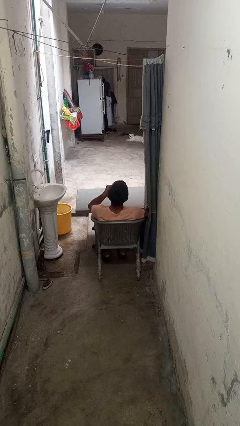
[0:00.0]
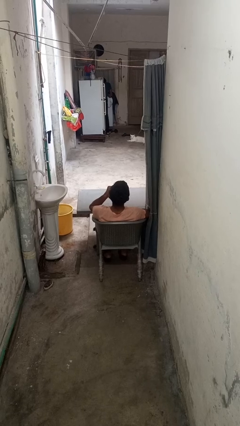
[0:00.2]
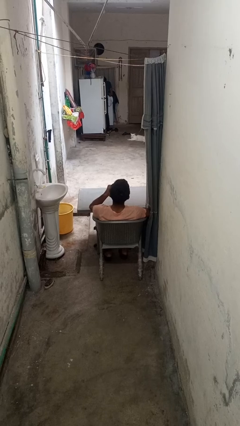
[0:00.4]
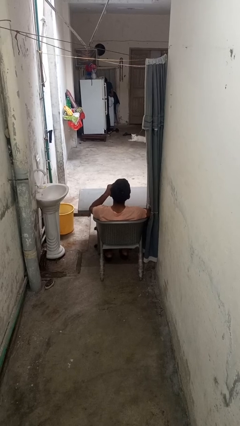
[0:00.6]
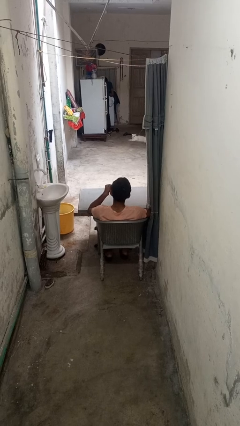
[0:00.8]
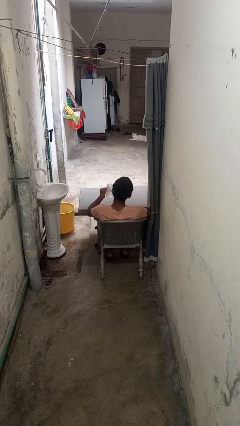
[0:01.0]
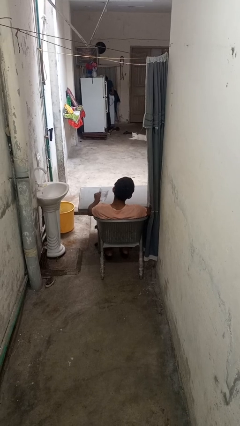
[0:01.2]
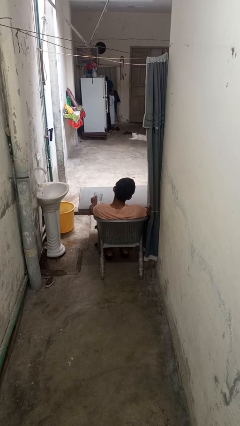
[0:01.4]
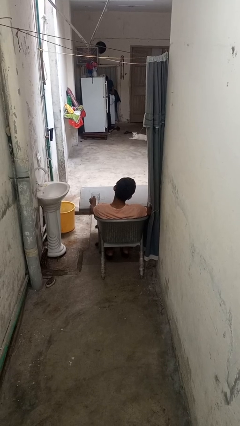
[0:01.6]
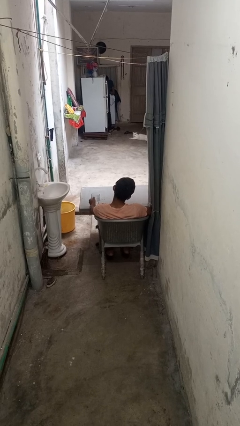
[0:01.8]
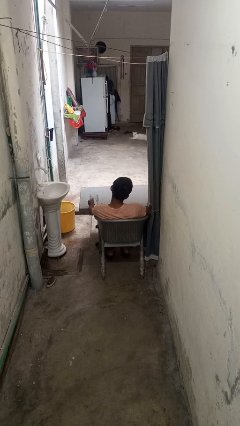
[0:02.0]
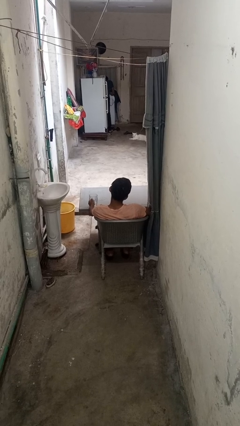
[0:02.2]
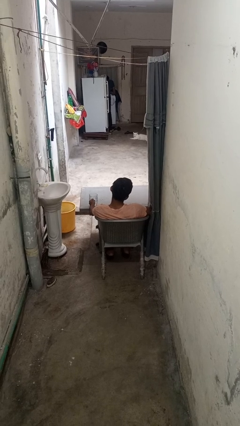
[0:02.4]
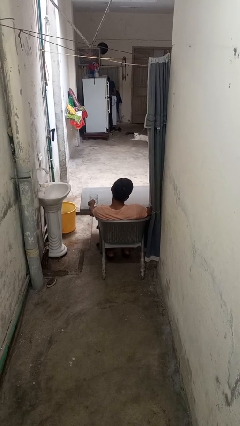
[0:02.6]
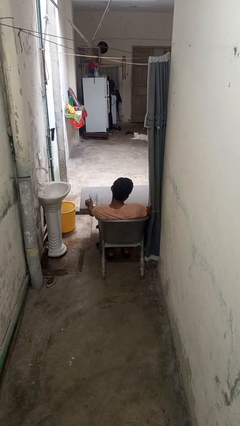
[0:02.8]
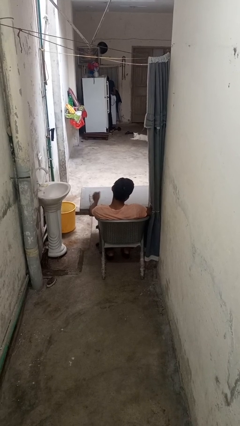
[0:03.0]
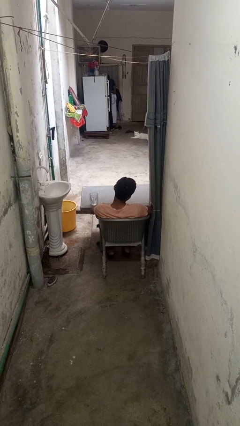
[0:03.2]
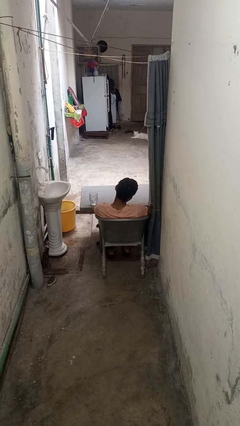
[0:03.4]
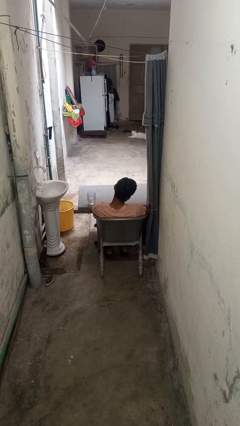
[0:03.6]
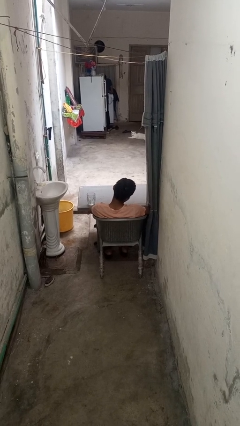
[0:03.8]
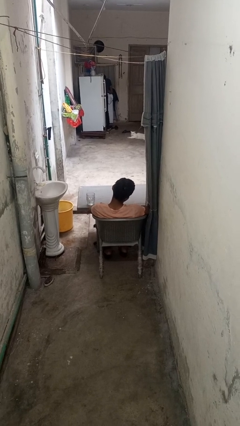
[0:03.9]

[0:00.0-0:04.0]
person puts down object on table

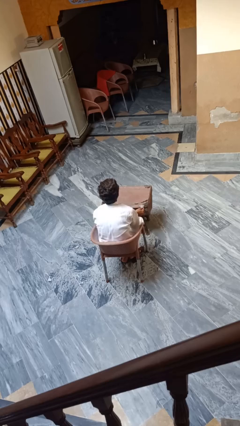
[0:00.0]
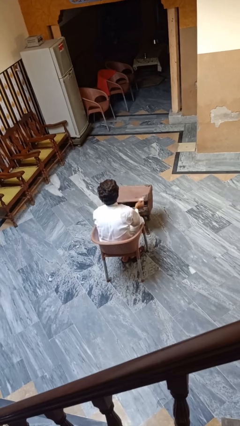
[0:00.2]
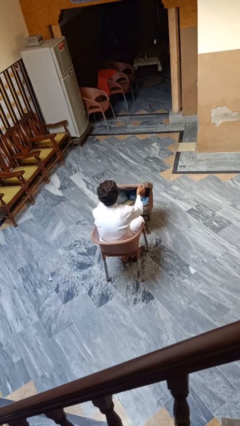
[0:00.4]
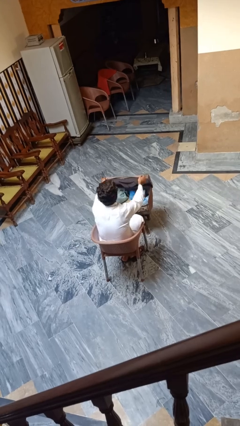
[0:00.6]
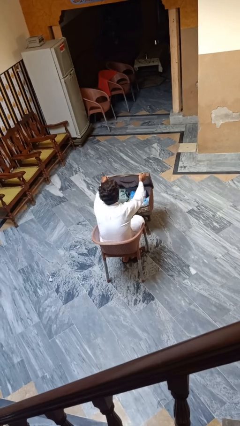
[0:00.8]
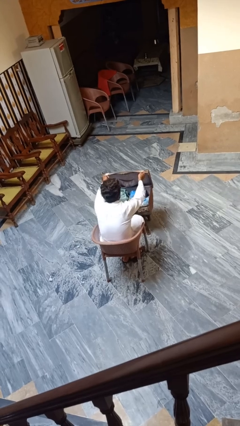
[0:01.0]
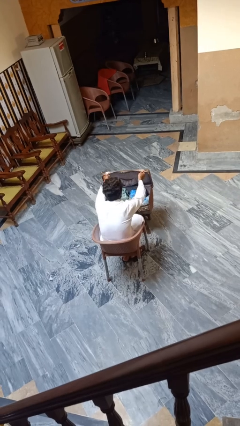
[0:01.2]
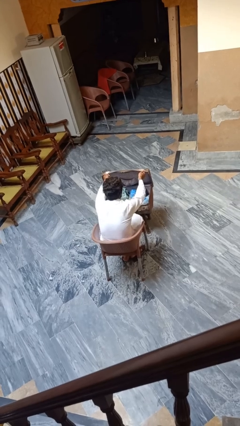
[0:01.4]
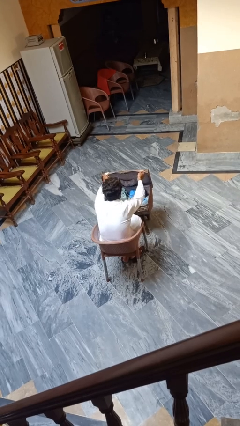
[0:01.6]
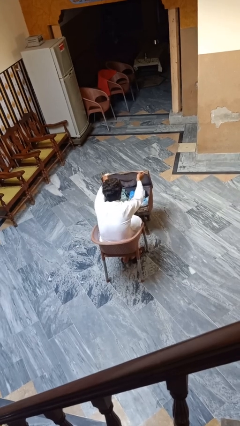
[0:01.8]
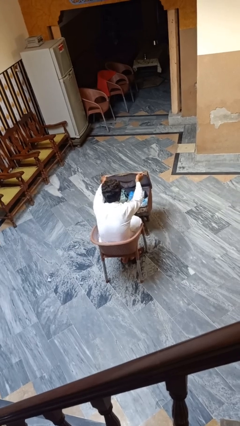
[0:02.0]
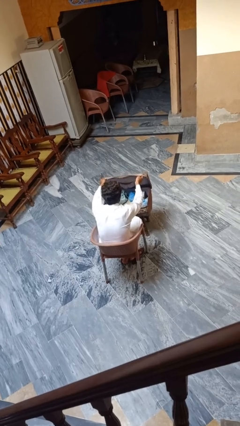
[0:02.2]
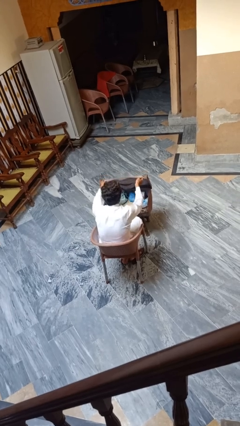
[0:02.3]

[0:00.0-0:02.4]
person opens suitcase

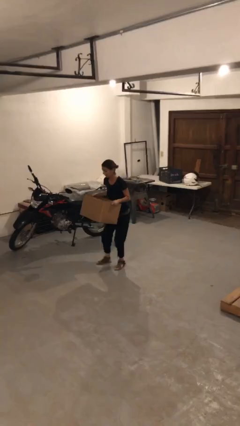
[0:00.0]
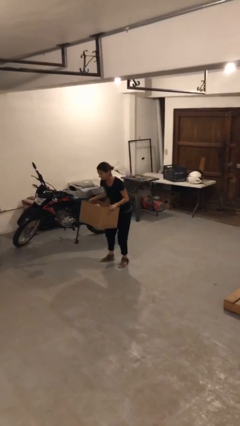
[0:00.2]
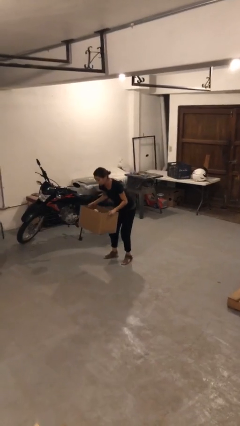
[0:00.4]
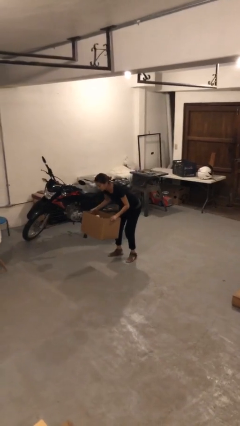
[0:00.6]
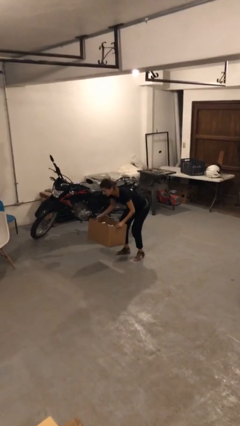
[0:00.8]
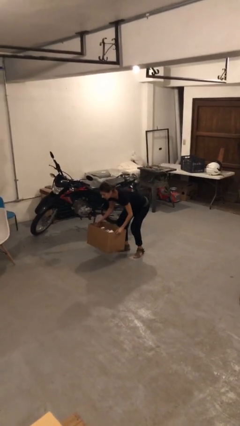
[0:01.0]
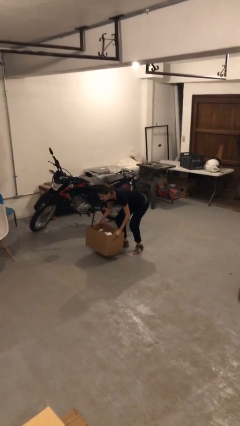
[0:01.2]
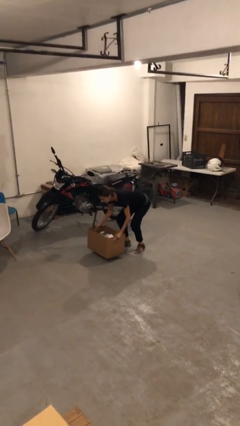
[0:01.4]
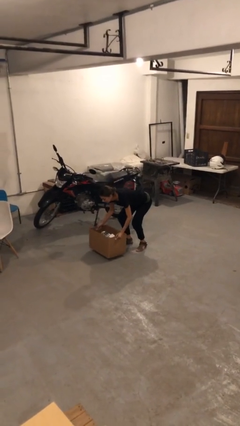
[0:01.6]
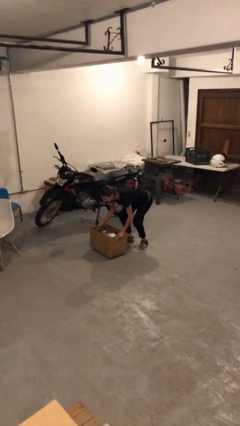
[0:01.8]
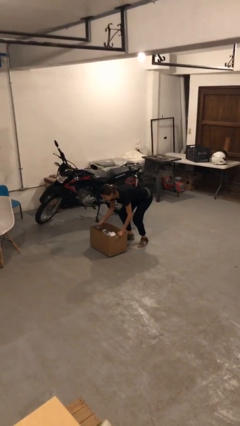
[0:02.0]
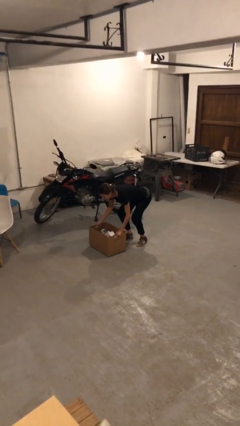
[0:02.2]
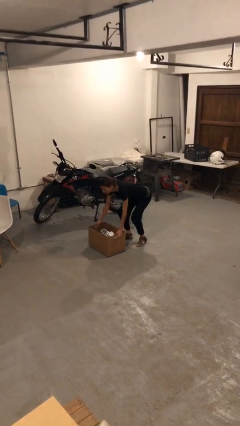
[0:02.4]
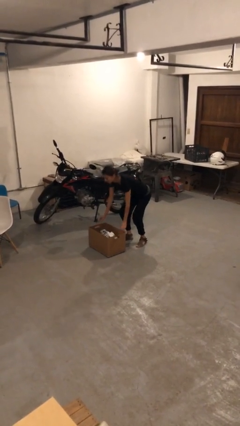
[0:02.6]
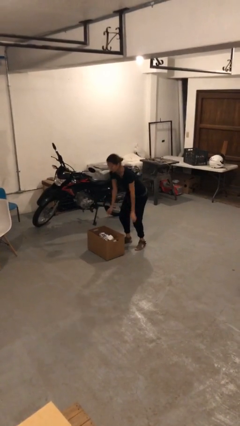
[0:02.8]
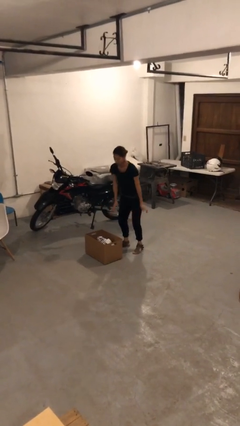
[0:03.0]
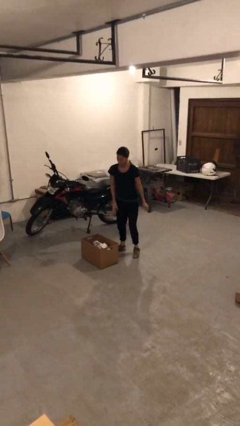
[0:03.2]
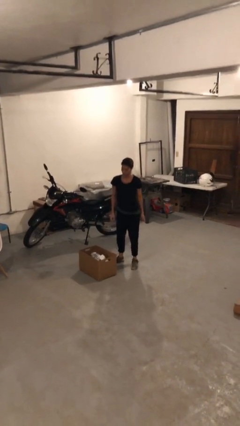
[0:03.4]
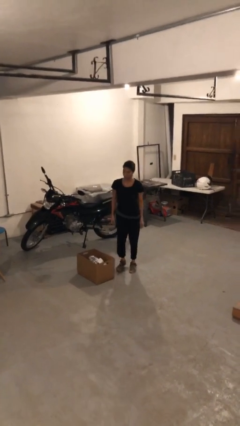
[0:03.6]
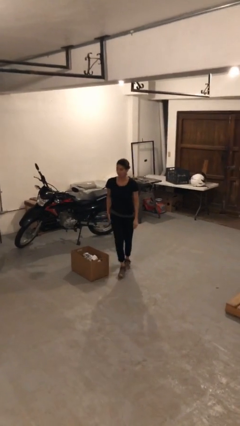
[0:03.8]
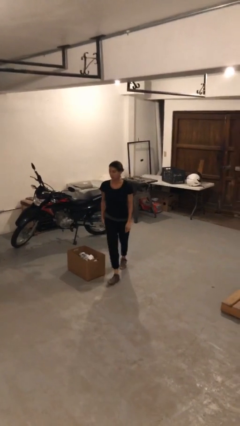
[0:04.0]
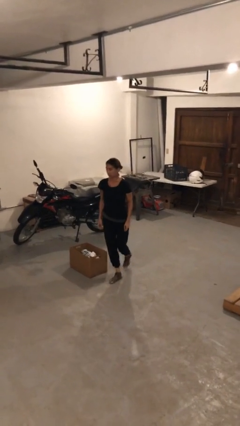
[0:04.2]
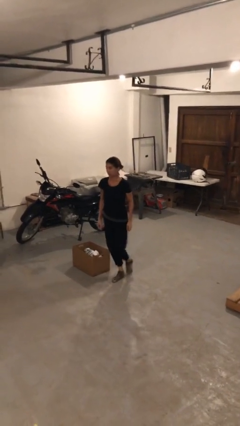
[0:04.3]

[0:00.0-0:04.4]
person puts down object on floor

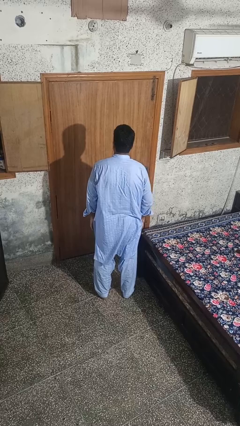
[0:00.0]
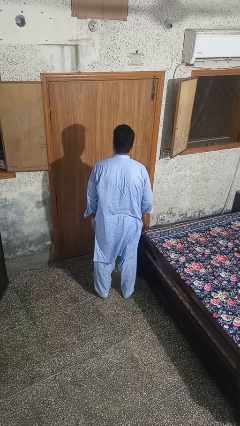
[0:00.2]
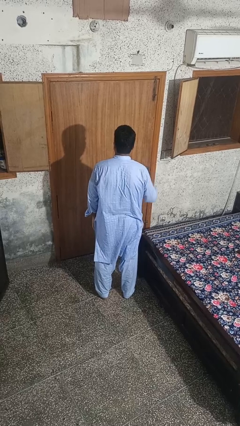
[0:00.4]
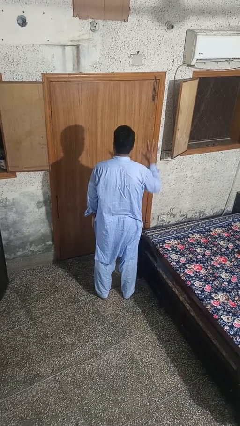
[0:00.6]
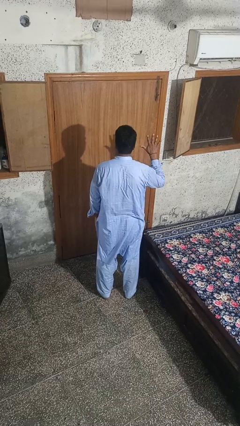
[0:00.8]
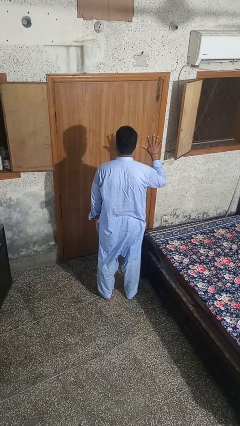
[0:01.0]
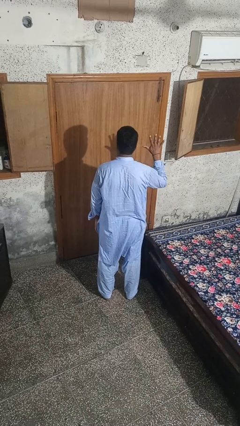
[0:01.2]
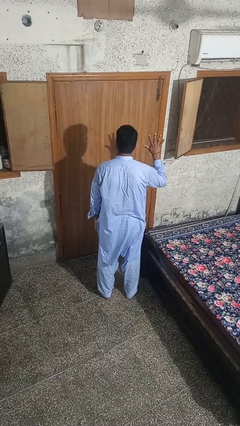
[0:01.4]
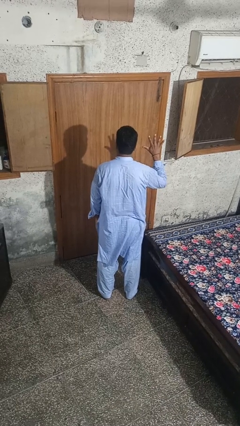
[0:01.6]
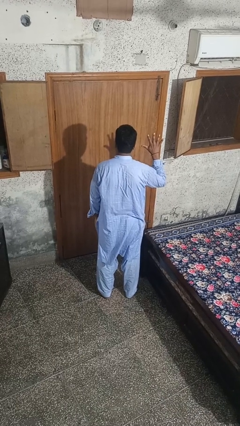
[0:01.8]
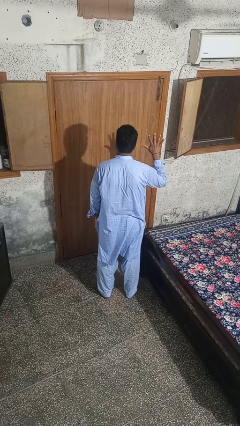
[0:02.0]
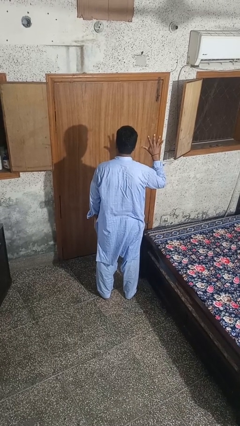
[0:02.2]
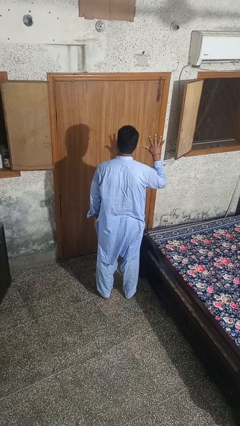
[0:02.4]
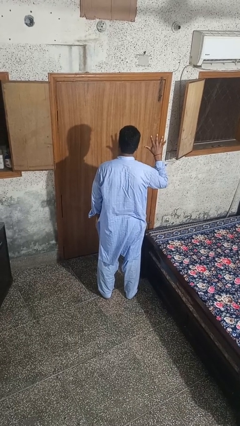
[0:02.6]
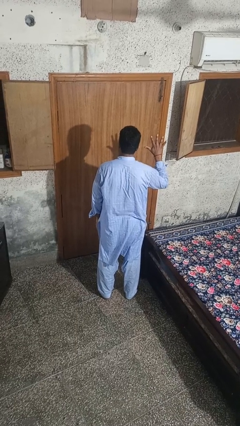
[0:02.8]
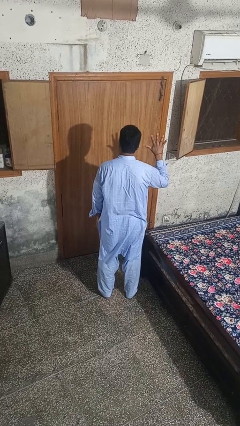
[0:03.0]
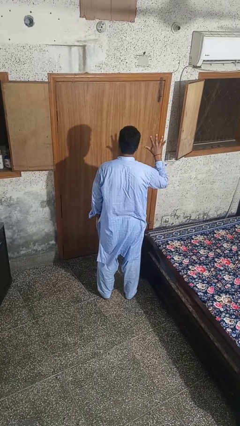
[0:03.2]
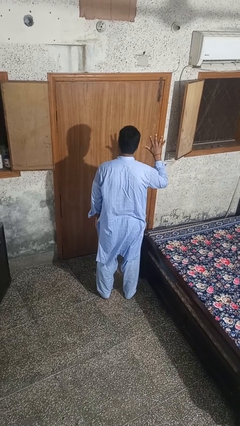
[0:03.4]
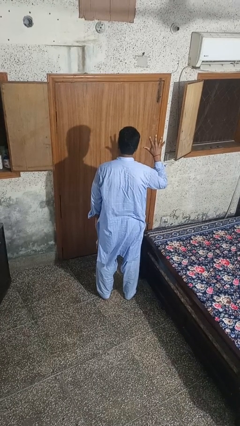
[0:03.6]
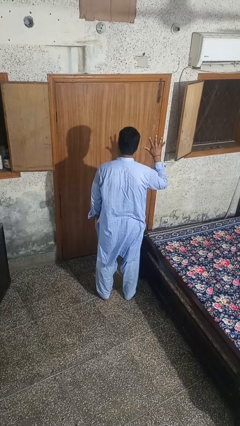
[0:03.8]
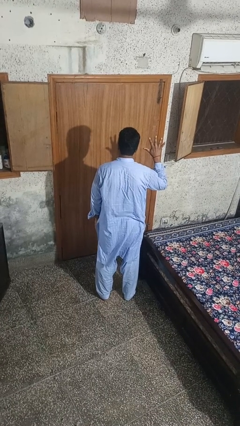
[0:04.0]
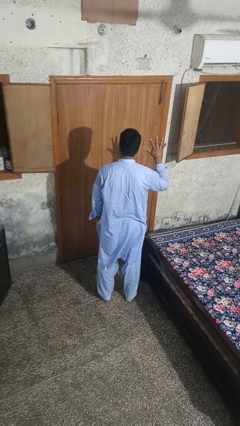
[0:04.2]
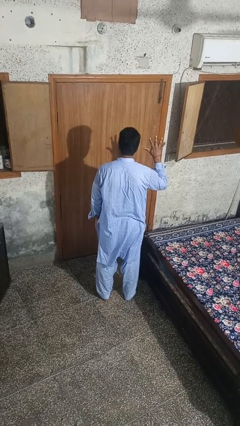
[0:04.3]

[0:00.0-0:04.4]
person gestures number five

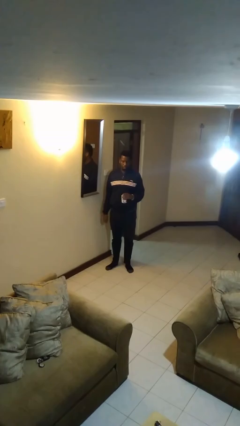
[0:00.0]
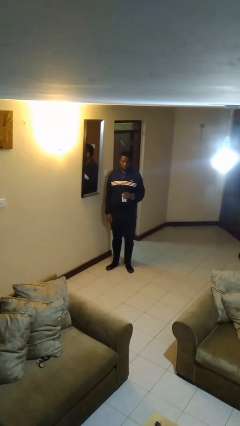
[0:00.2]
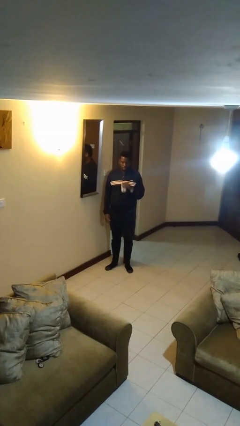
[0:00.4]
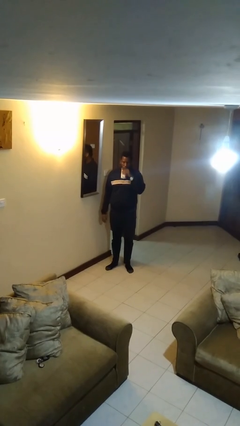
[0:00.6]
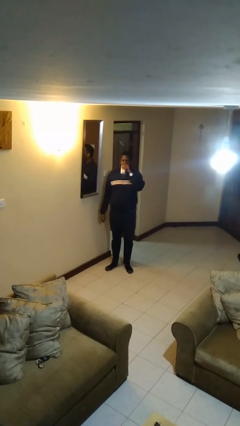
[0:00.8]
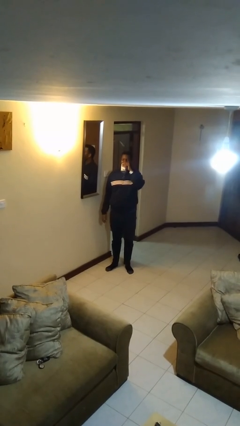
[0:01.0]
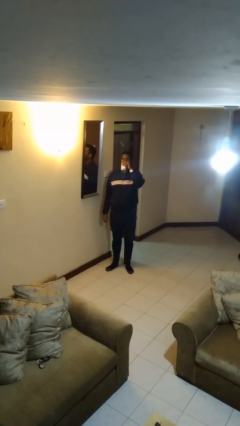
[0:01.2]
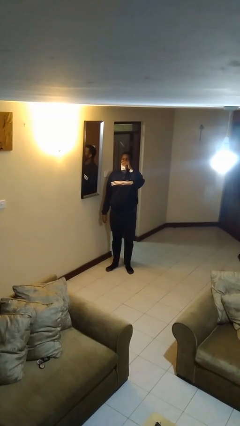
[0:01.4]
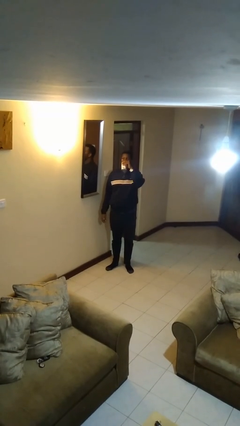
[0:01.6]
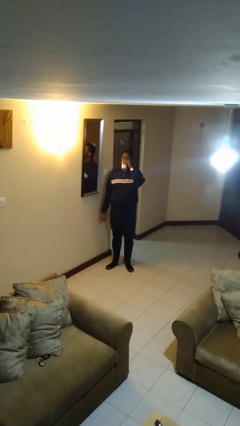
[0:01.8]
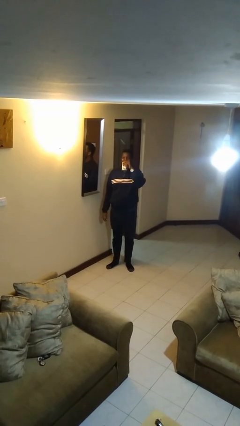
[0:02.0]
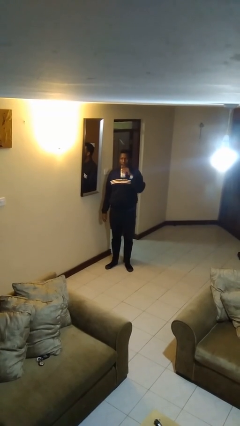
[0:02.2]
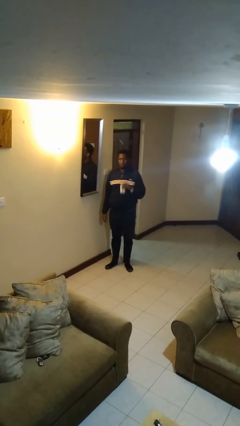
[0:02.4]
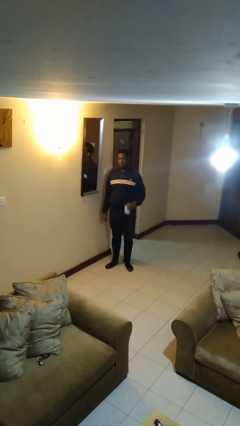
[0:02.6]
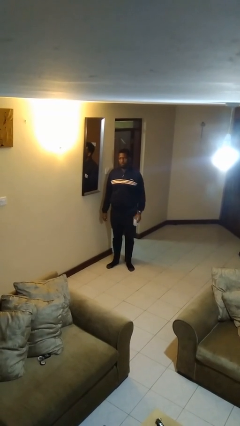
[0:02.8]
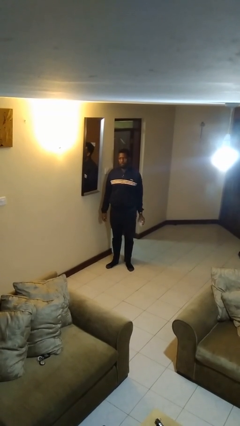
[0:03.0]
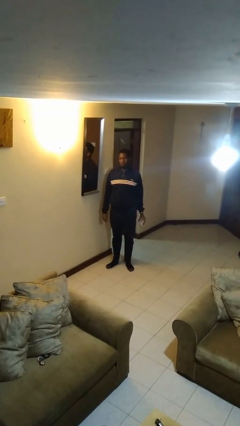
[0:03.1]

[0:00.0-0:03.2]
person drinks from beverage can
